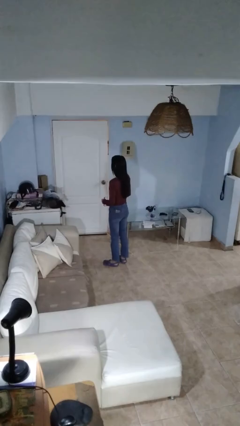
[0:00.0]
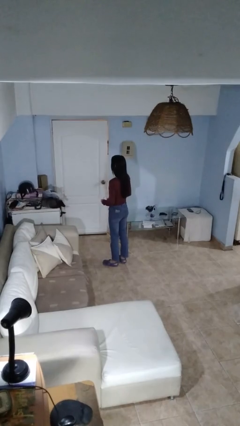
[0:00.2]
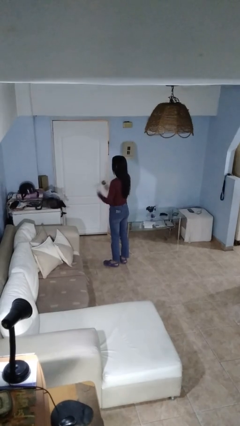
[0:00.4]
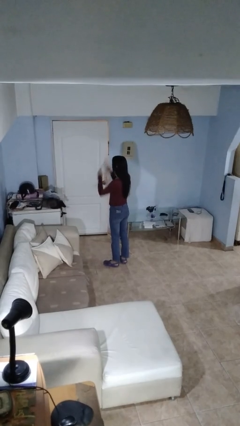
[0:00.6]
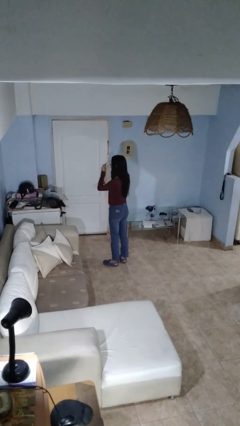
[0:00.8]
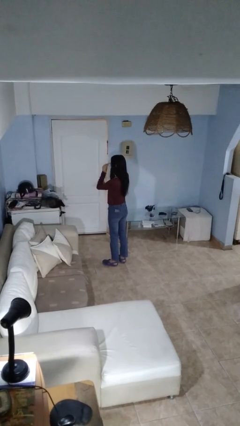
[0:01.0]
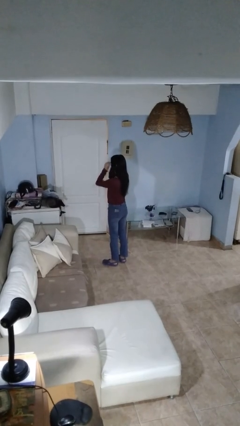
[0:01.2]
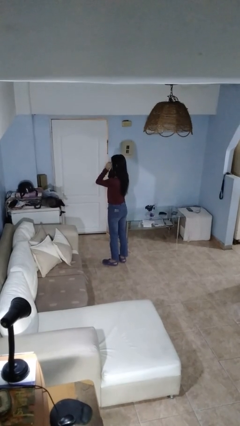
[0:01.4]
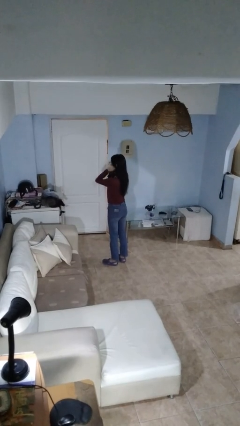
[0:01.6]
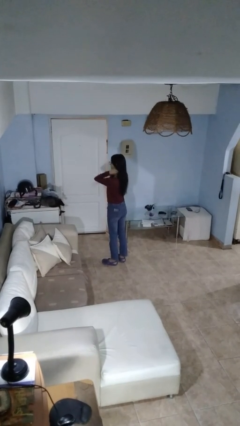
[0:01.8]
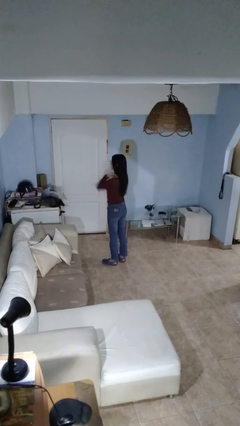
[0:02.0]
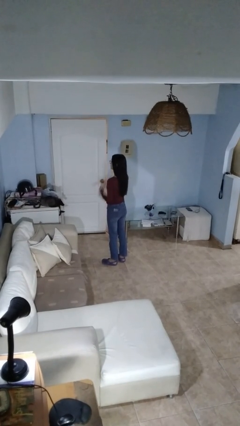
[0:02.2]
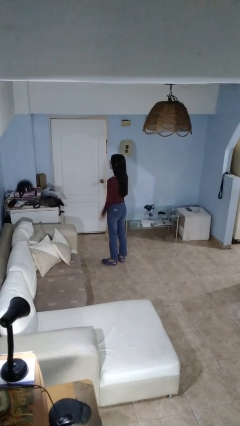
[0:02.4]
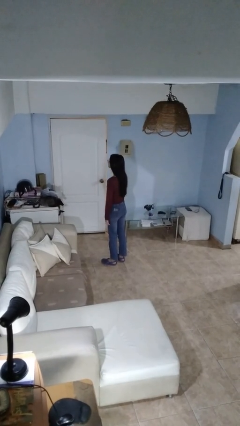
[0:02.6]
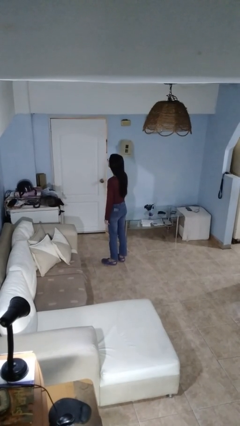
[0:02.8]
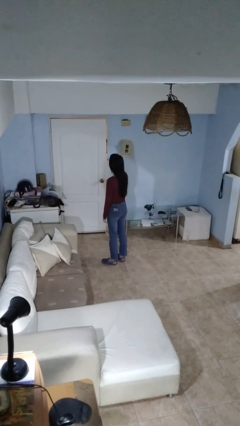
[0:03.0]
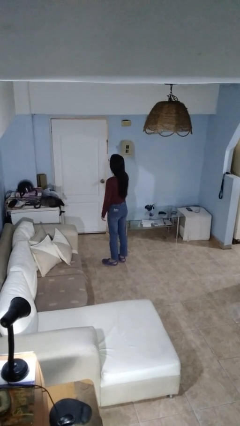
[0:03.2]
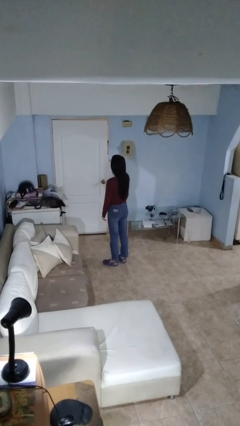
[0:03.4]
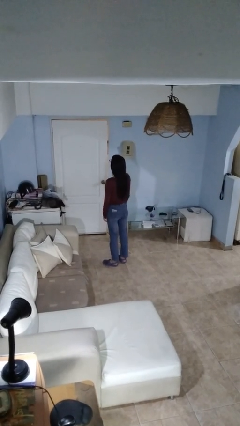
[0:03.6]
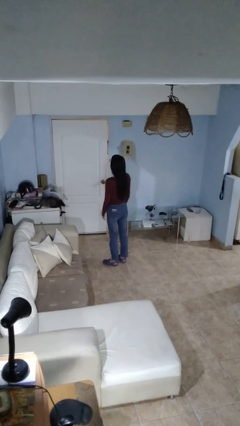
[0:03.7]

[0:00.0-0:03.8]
person puts on glasses

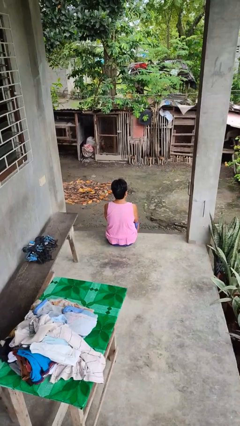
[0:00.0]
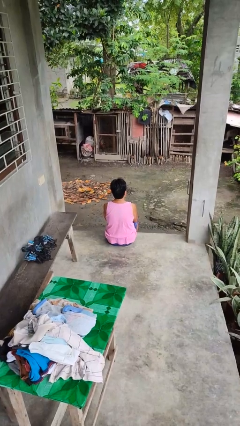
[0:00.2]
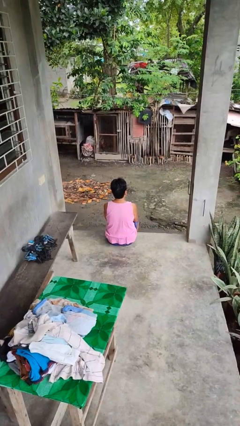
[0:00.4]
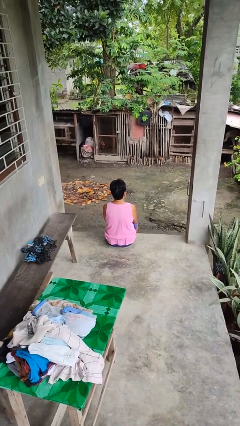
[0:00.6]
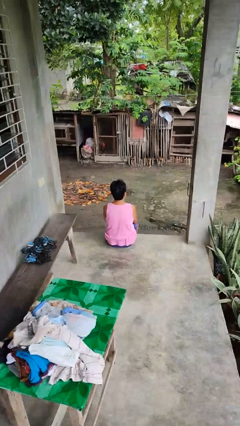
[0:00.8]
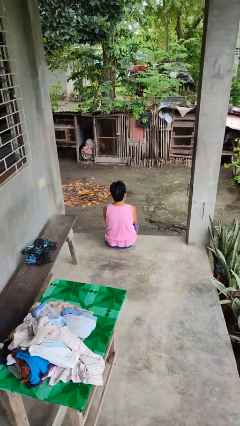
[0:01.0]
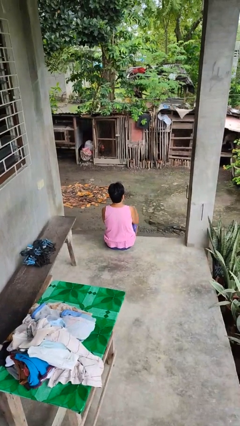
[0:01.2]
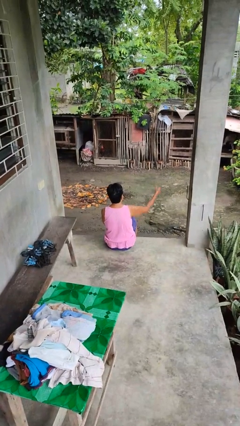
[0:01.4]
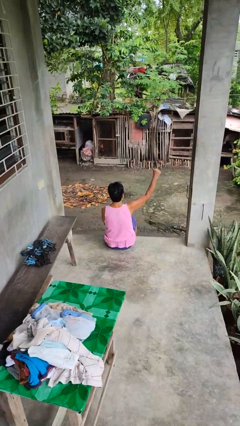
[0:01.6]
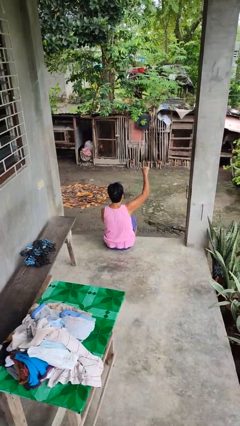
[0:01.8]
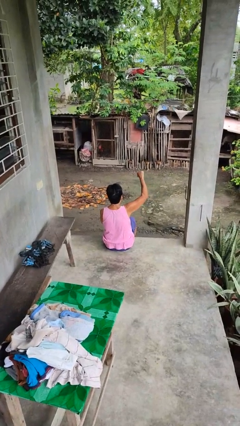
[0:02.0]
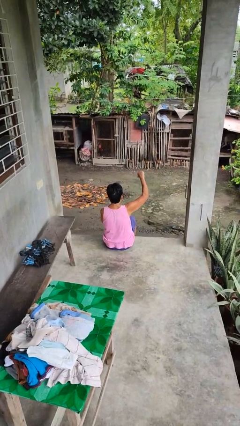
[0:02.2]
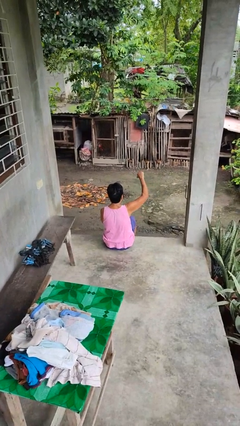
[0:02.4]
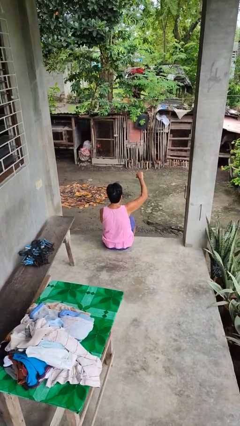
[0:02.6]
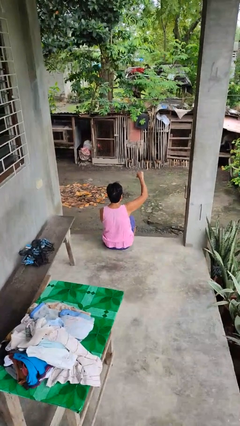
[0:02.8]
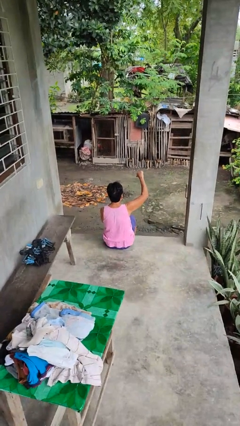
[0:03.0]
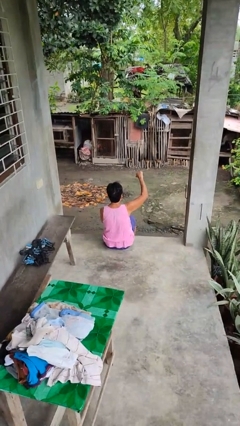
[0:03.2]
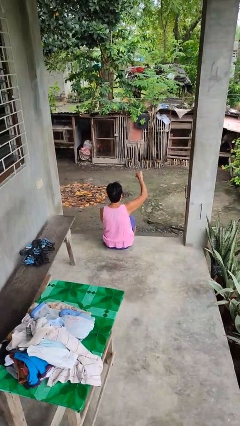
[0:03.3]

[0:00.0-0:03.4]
person gestures thumbs down

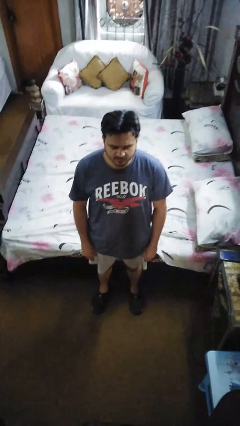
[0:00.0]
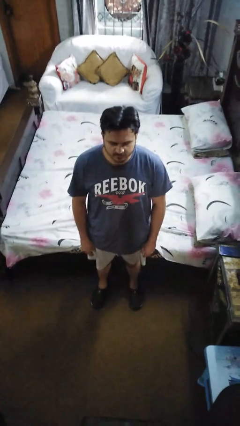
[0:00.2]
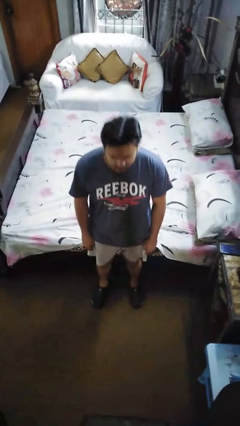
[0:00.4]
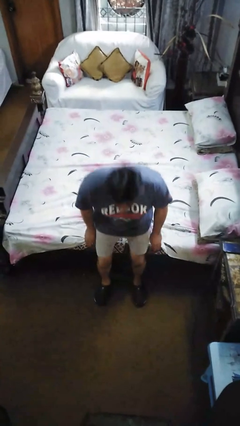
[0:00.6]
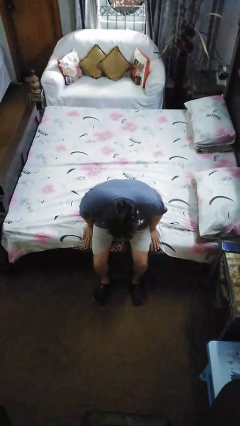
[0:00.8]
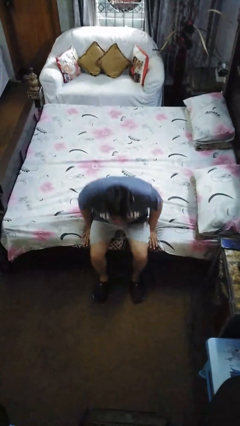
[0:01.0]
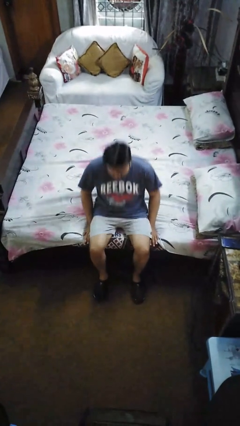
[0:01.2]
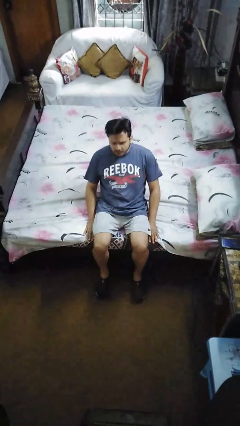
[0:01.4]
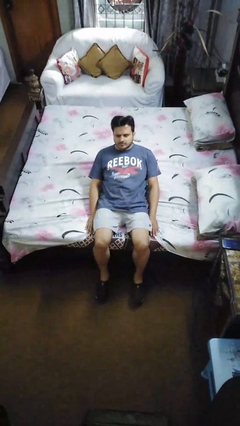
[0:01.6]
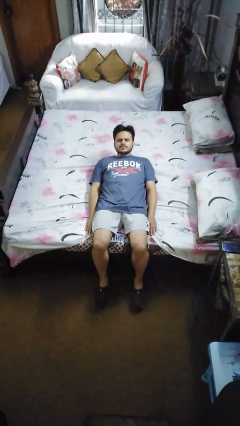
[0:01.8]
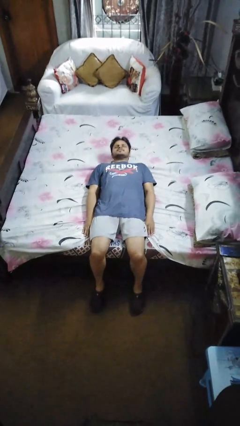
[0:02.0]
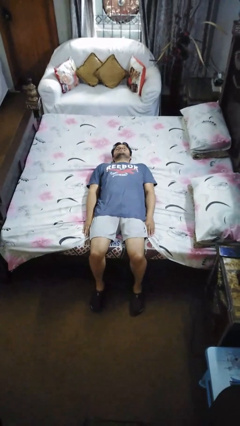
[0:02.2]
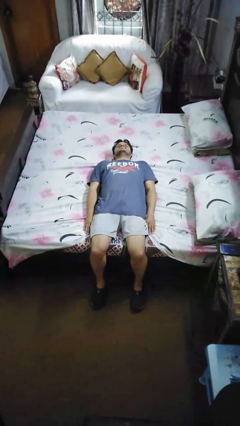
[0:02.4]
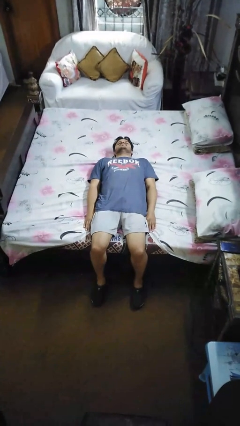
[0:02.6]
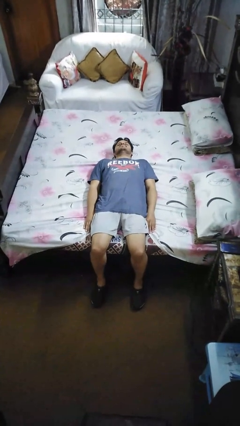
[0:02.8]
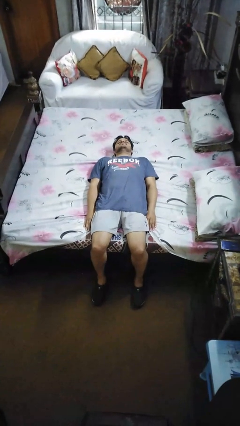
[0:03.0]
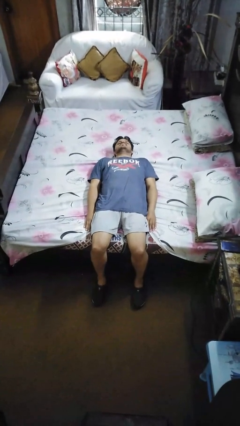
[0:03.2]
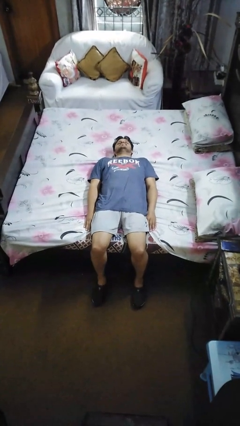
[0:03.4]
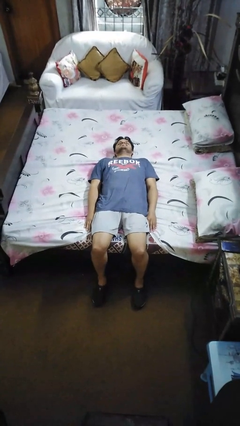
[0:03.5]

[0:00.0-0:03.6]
person lies down on bed

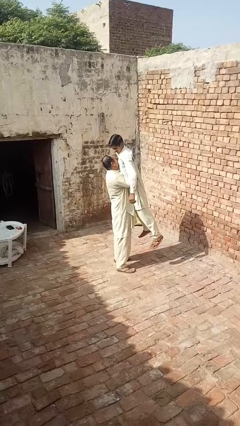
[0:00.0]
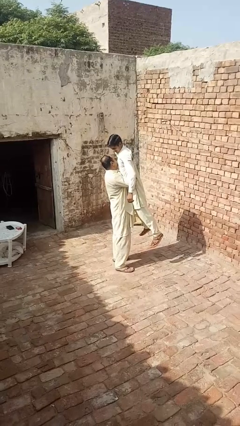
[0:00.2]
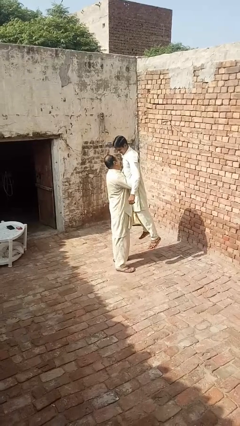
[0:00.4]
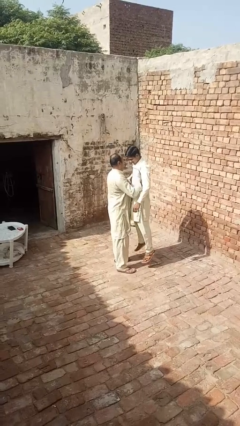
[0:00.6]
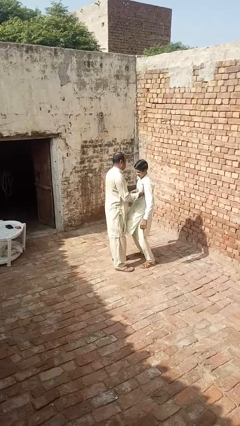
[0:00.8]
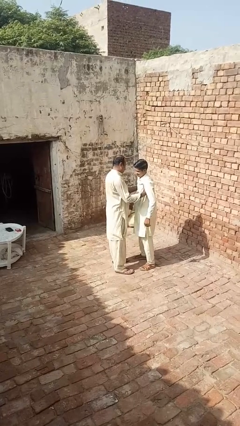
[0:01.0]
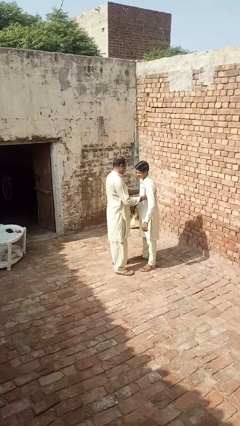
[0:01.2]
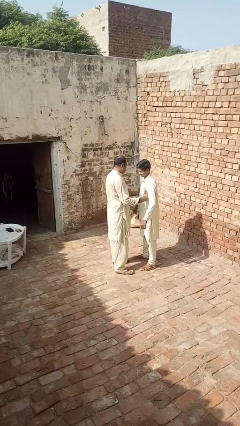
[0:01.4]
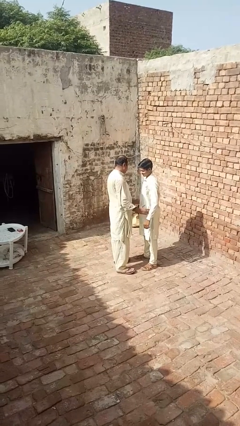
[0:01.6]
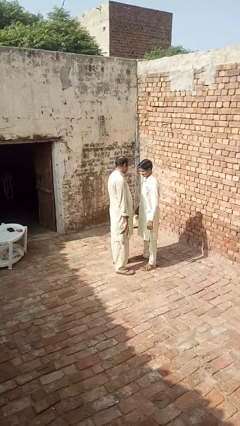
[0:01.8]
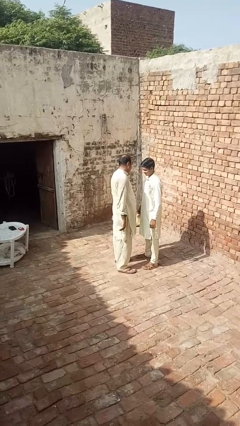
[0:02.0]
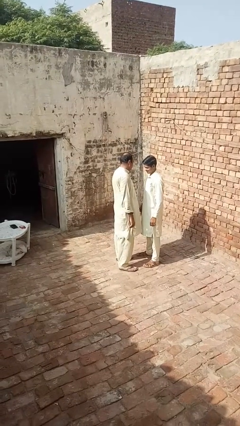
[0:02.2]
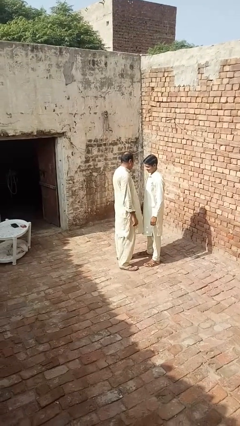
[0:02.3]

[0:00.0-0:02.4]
person puts down person

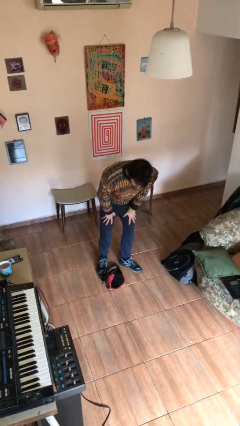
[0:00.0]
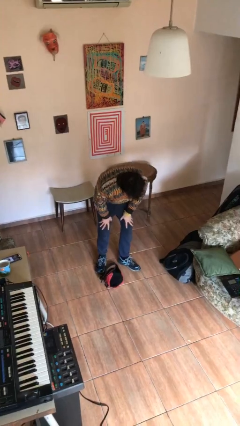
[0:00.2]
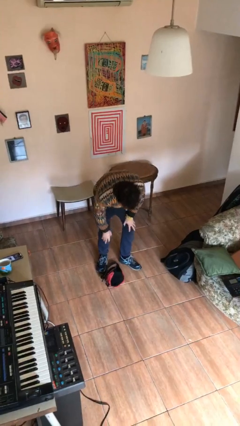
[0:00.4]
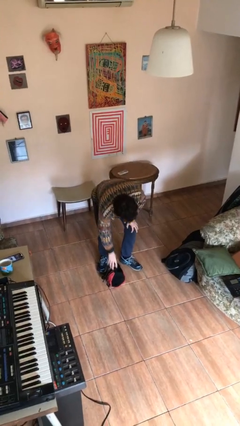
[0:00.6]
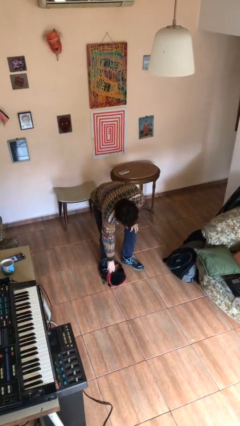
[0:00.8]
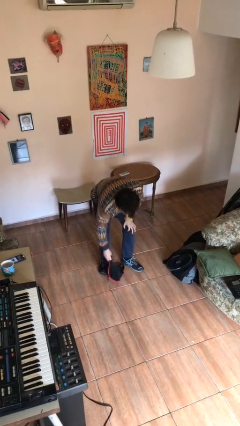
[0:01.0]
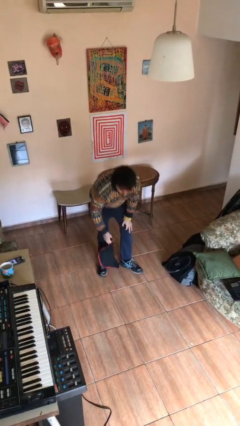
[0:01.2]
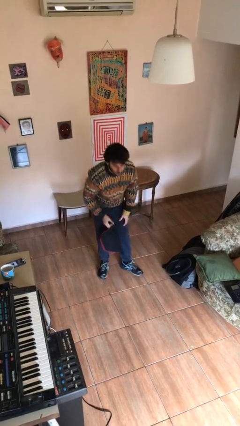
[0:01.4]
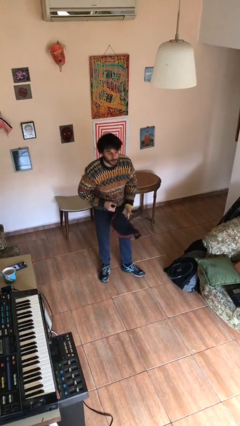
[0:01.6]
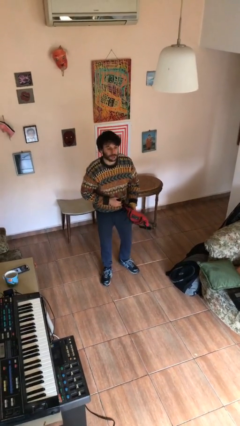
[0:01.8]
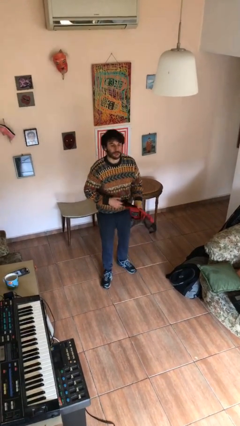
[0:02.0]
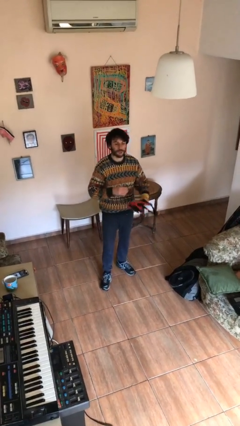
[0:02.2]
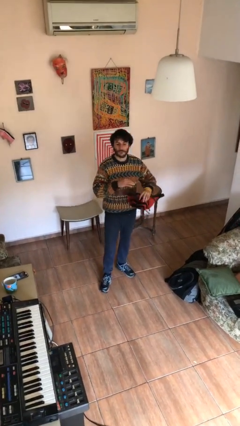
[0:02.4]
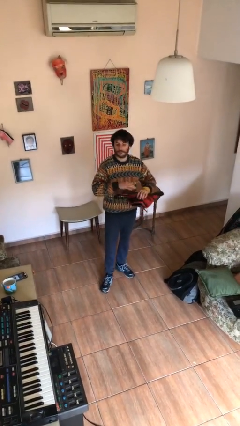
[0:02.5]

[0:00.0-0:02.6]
person picks up object from floor

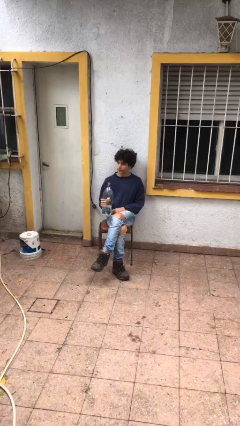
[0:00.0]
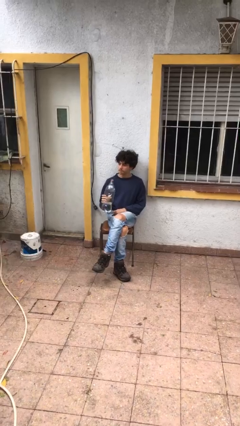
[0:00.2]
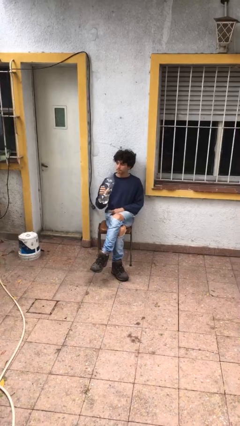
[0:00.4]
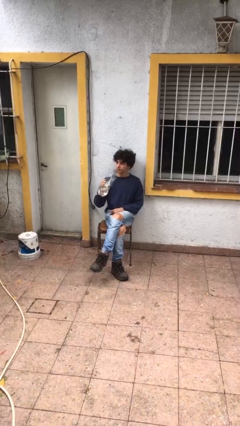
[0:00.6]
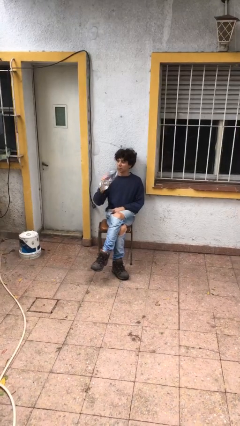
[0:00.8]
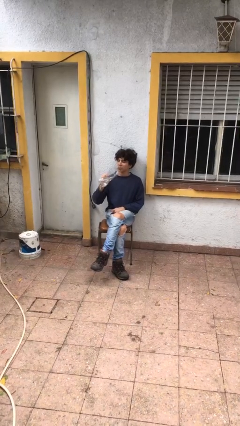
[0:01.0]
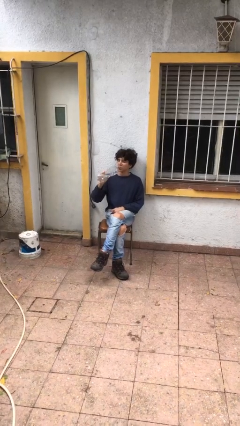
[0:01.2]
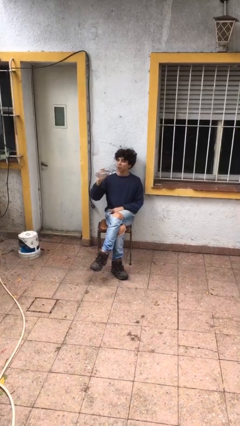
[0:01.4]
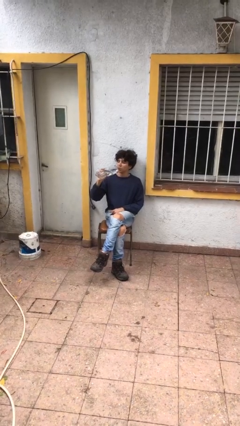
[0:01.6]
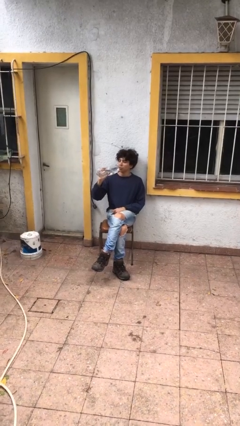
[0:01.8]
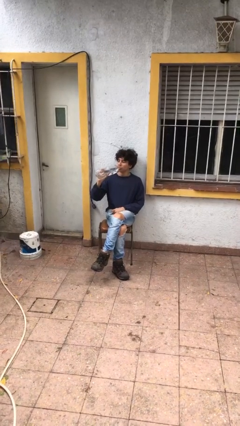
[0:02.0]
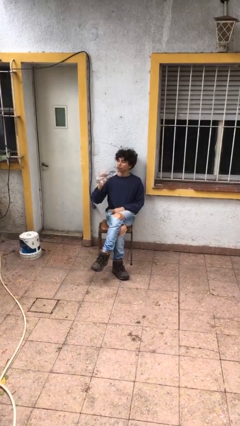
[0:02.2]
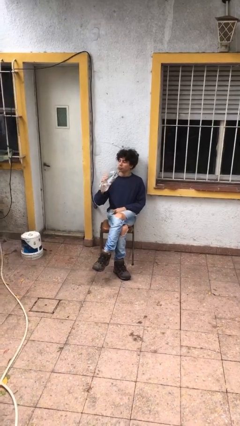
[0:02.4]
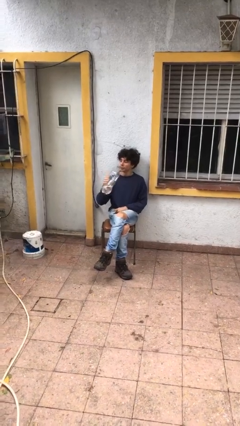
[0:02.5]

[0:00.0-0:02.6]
person drinks from bottle
